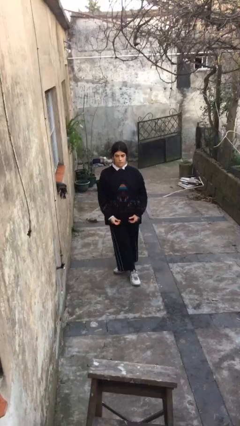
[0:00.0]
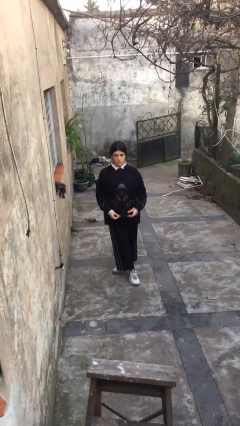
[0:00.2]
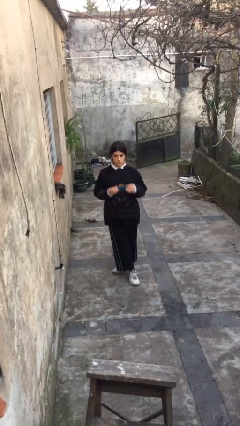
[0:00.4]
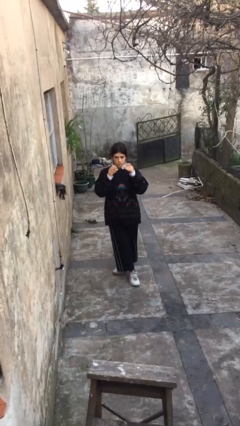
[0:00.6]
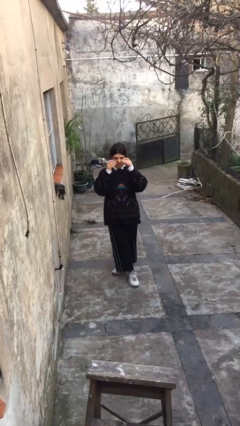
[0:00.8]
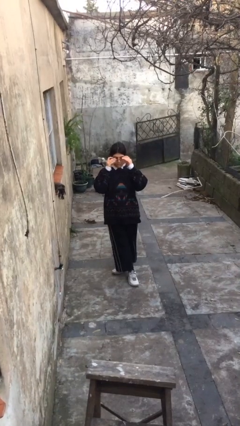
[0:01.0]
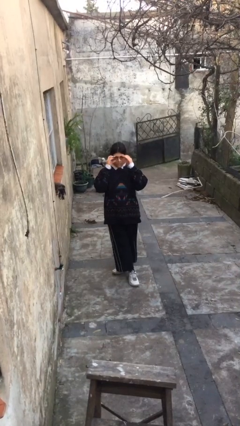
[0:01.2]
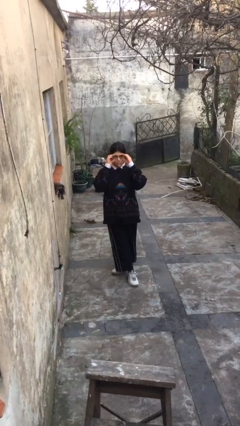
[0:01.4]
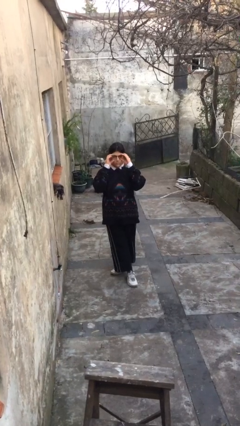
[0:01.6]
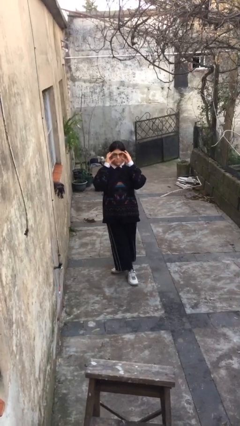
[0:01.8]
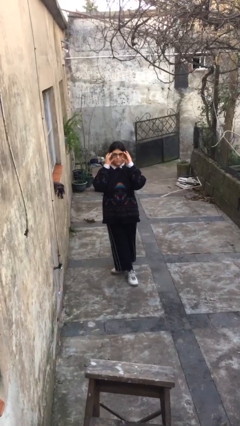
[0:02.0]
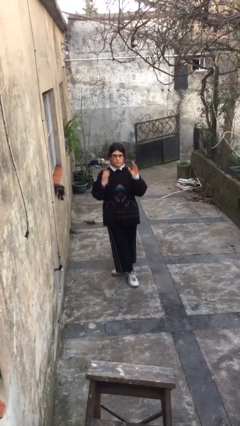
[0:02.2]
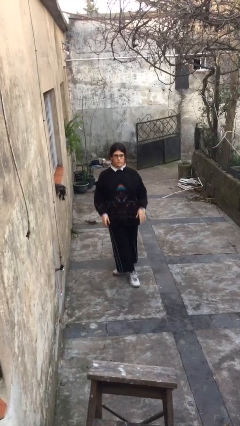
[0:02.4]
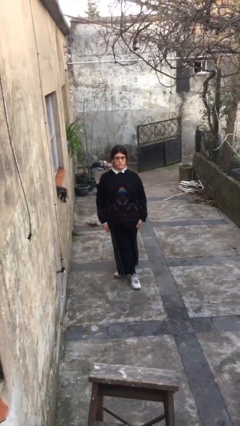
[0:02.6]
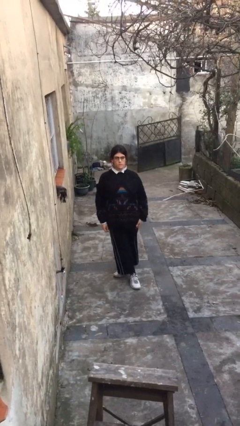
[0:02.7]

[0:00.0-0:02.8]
person puts on glasses

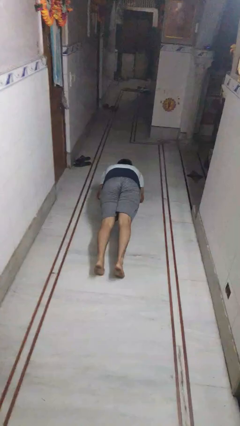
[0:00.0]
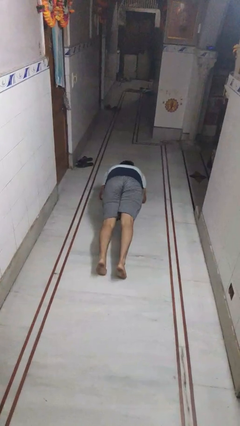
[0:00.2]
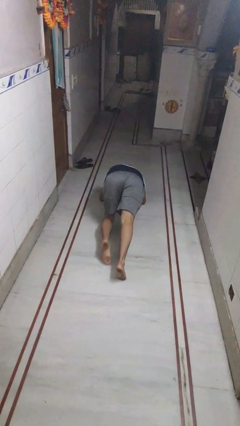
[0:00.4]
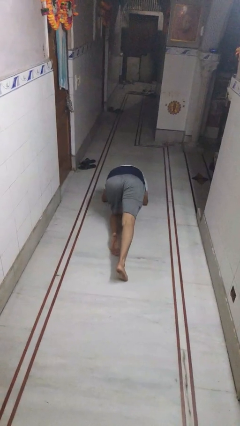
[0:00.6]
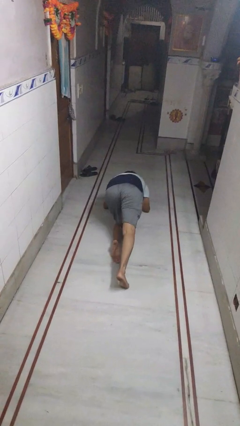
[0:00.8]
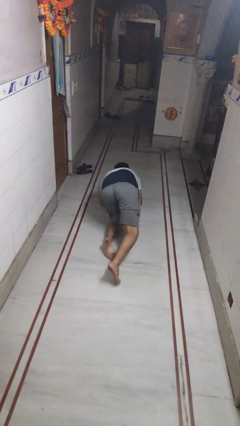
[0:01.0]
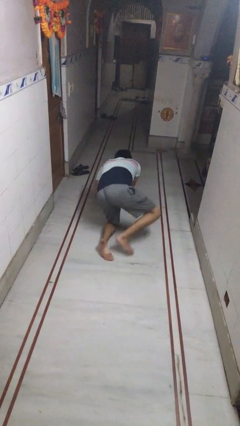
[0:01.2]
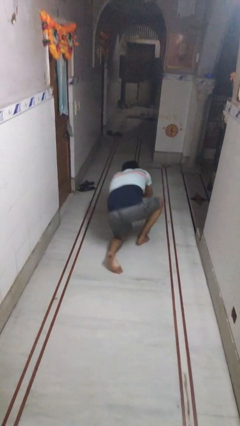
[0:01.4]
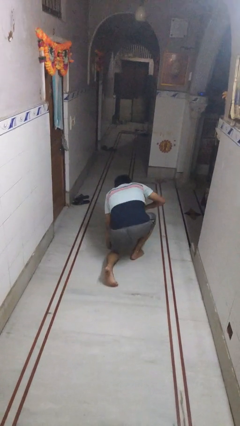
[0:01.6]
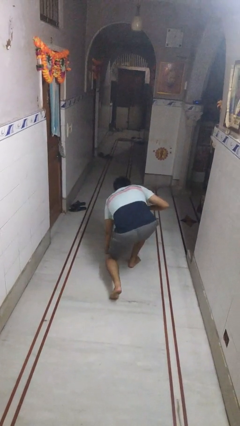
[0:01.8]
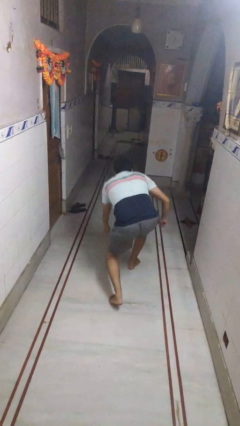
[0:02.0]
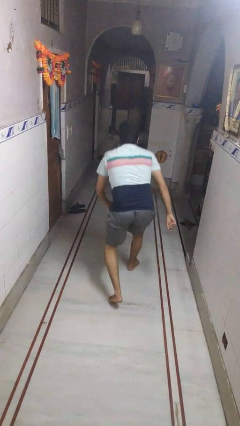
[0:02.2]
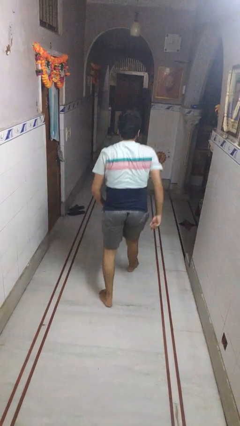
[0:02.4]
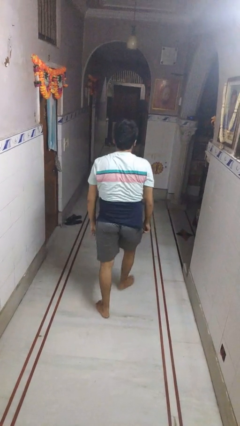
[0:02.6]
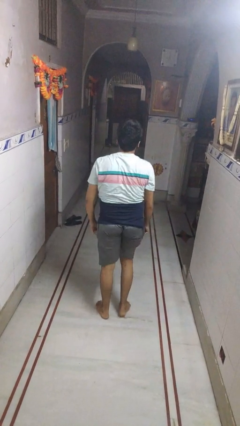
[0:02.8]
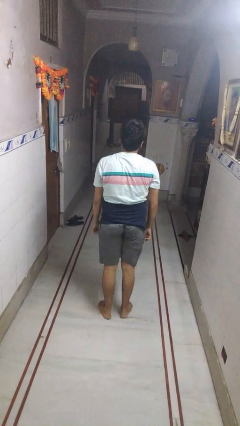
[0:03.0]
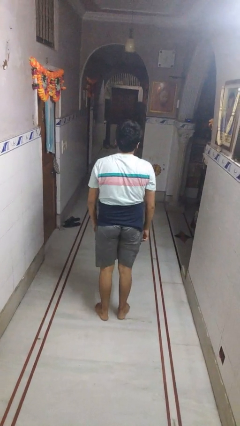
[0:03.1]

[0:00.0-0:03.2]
person stands up from floor

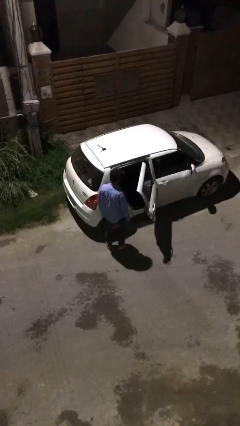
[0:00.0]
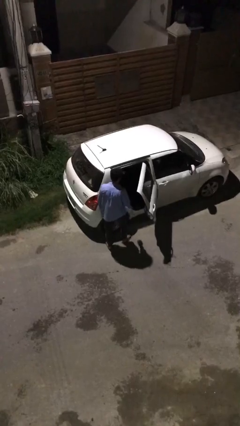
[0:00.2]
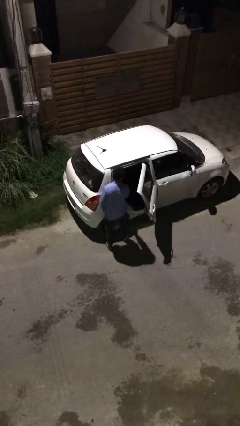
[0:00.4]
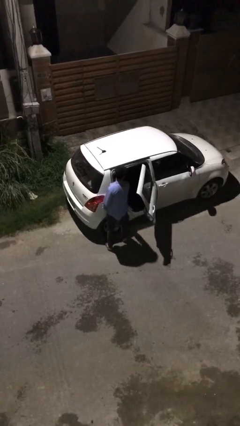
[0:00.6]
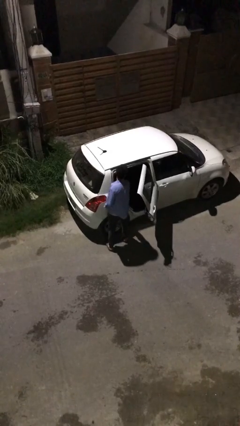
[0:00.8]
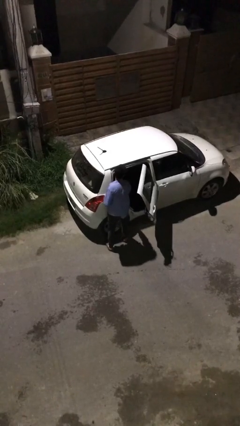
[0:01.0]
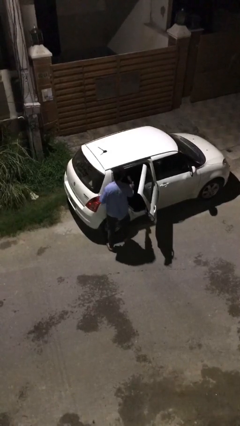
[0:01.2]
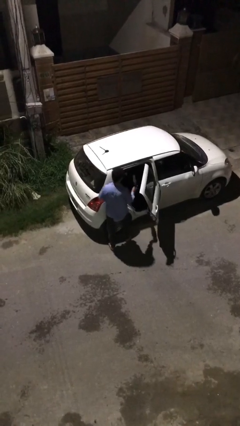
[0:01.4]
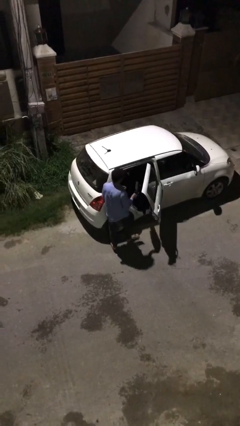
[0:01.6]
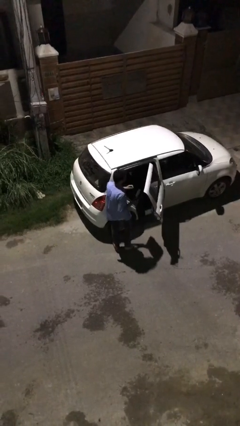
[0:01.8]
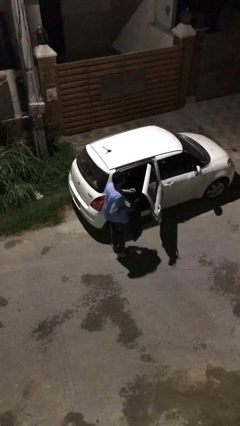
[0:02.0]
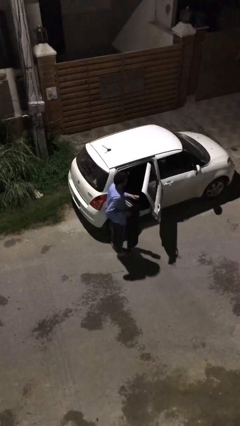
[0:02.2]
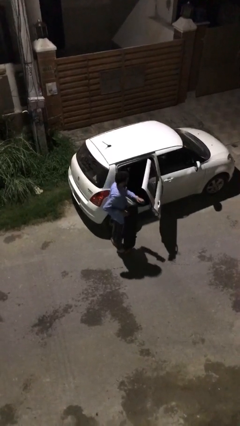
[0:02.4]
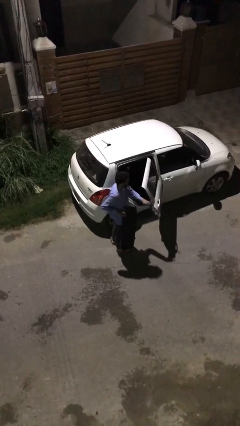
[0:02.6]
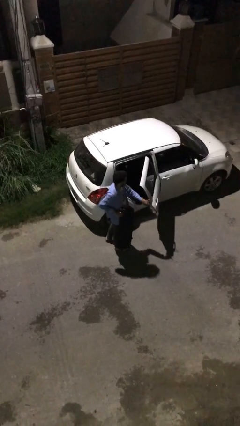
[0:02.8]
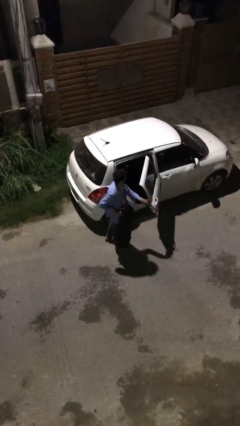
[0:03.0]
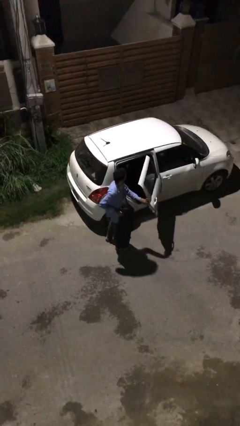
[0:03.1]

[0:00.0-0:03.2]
person unloads car

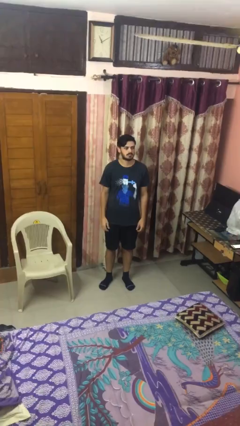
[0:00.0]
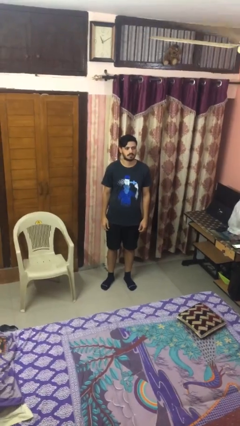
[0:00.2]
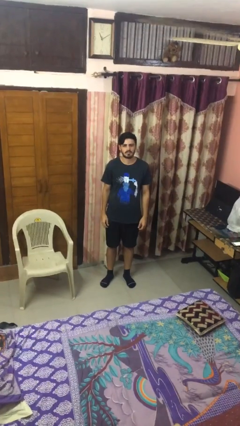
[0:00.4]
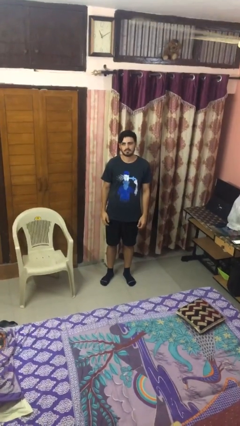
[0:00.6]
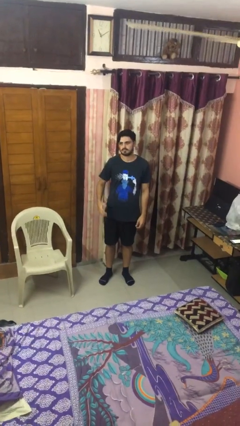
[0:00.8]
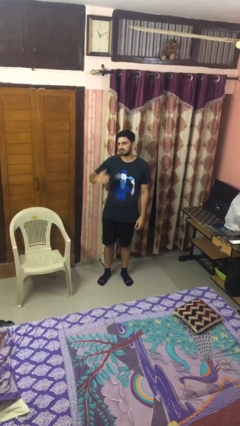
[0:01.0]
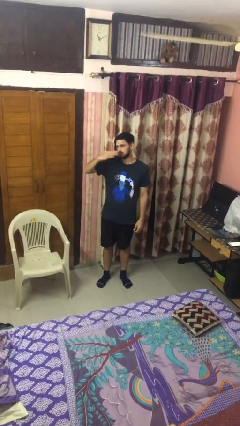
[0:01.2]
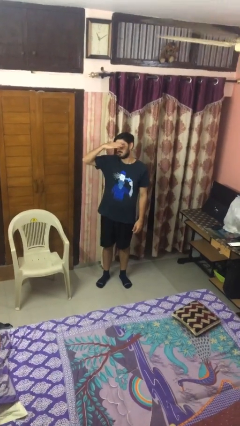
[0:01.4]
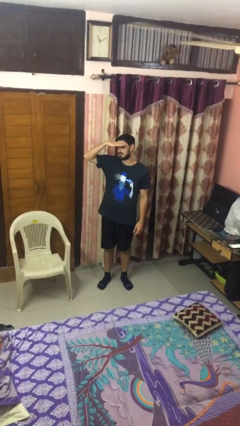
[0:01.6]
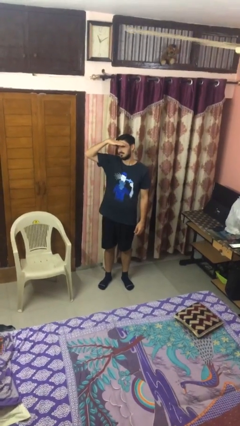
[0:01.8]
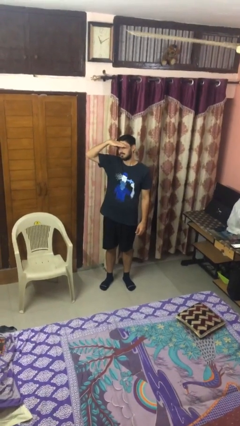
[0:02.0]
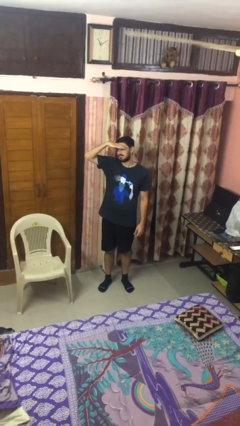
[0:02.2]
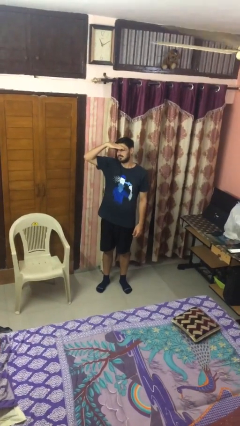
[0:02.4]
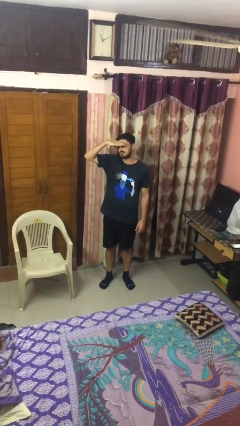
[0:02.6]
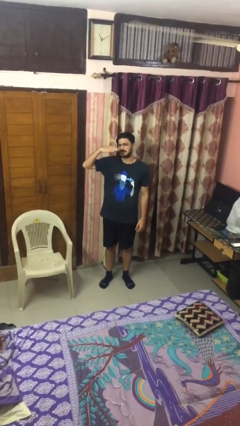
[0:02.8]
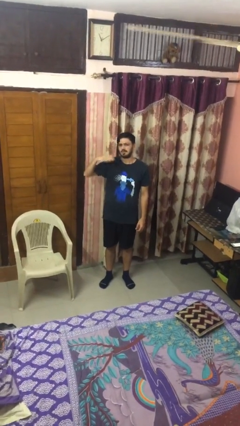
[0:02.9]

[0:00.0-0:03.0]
person shades eyes

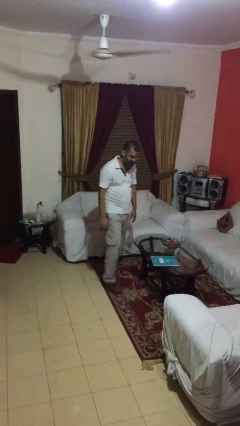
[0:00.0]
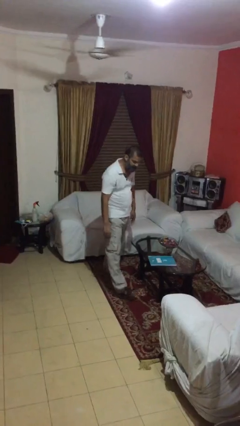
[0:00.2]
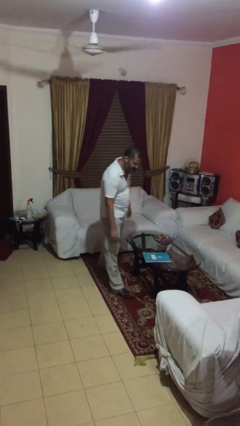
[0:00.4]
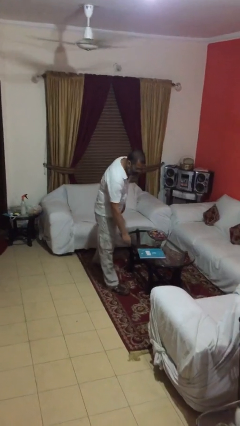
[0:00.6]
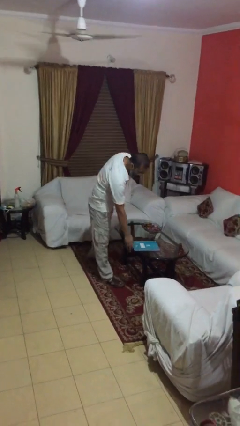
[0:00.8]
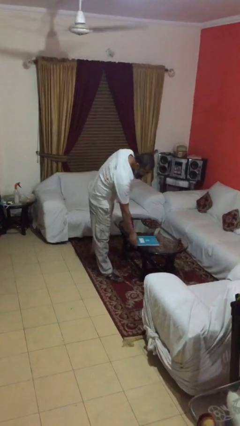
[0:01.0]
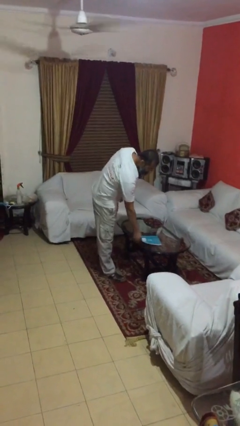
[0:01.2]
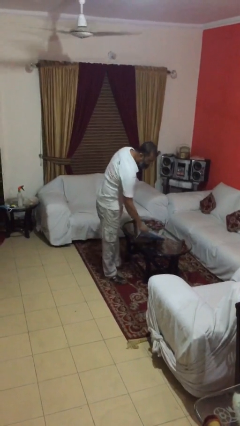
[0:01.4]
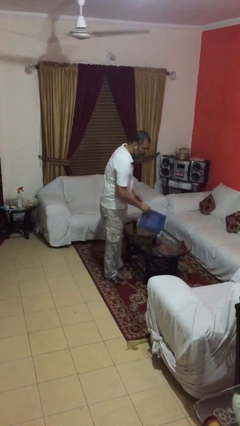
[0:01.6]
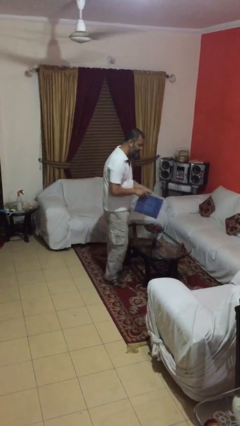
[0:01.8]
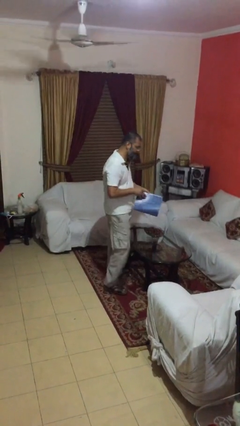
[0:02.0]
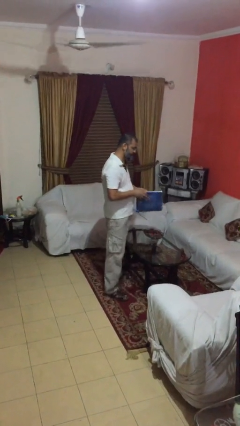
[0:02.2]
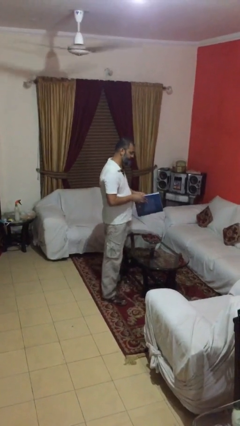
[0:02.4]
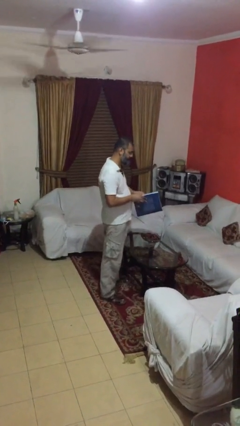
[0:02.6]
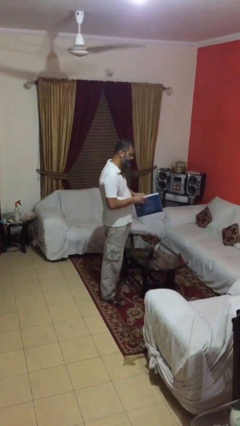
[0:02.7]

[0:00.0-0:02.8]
person picks up object from table

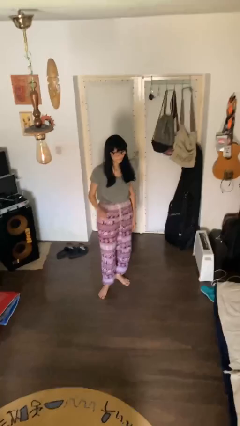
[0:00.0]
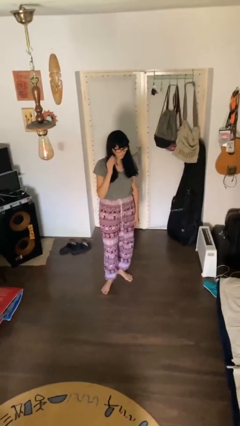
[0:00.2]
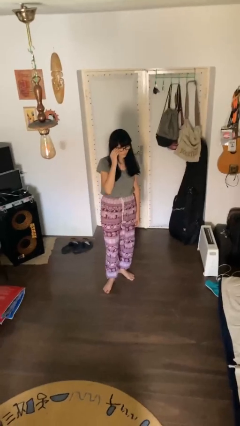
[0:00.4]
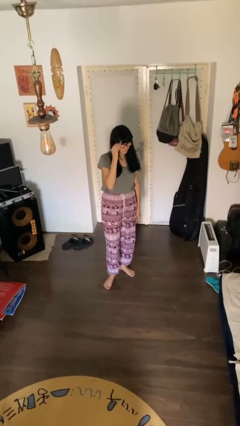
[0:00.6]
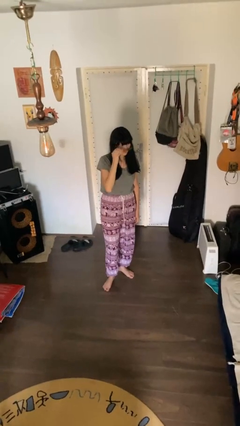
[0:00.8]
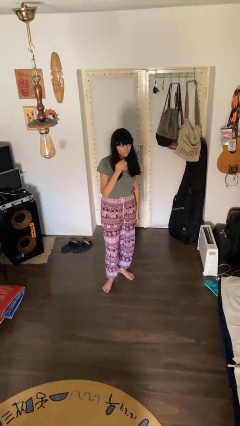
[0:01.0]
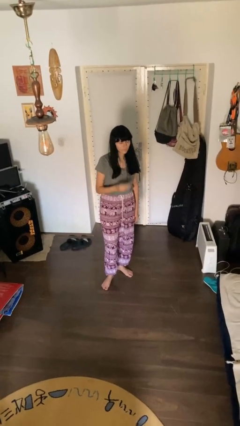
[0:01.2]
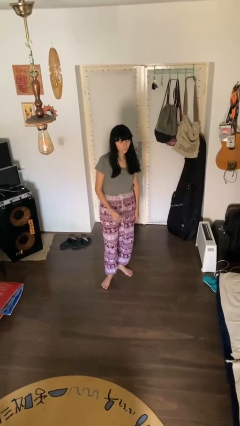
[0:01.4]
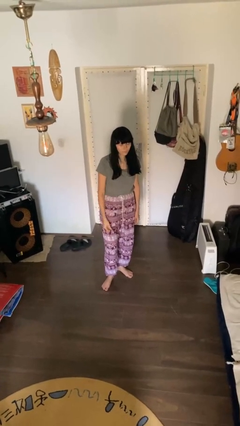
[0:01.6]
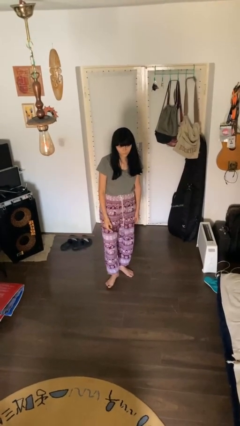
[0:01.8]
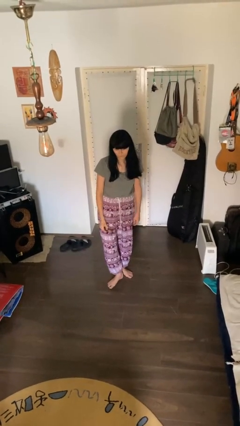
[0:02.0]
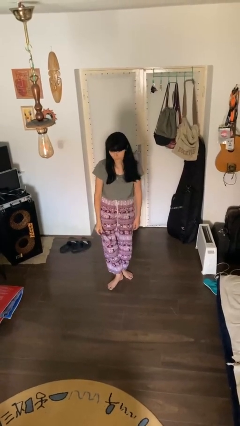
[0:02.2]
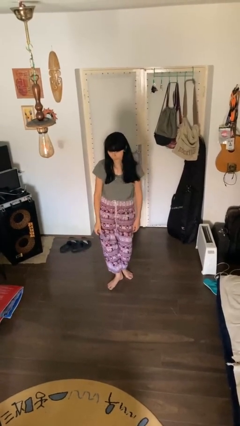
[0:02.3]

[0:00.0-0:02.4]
person takes off glasses

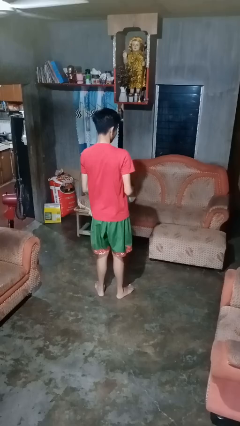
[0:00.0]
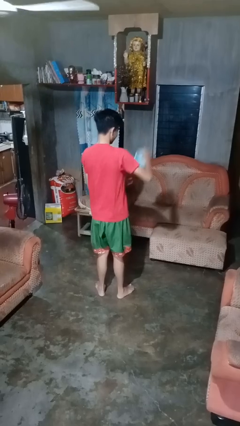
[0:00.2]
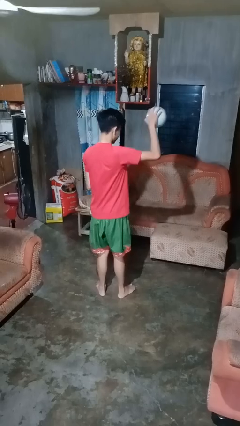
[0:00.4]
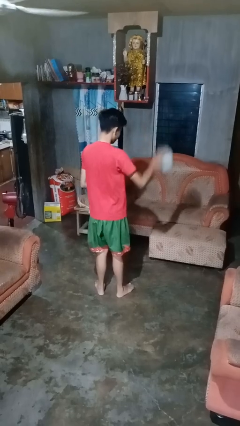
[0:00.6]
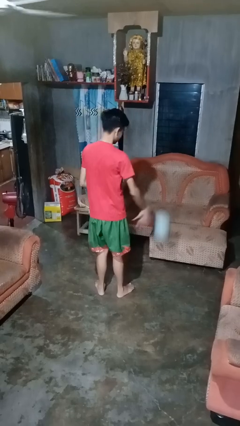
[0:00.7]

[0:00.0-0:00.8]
person bounces ball on floor
